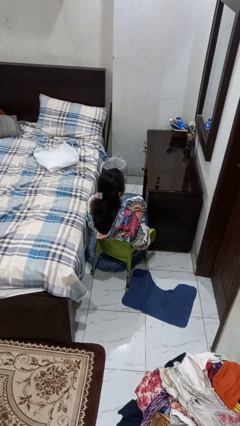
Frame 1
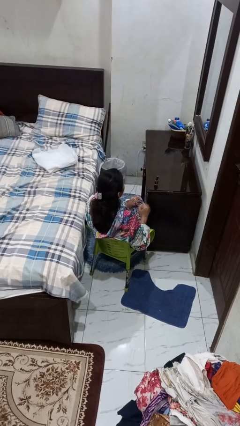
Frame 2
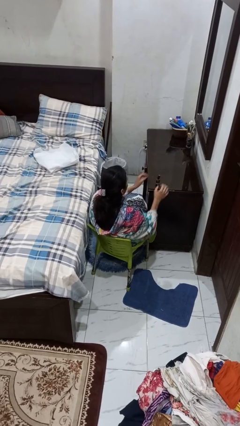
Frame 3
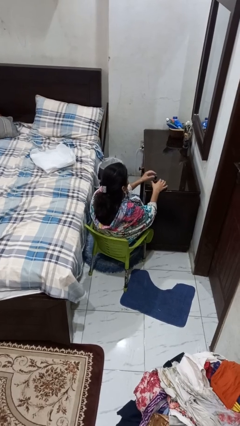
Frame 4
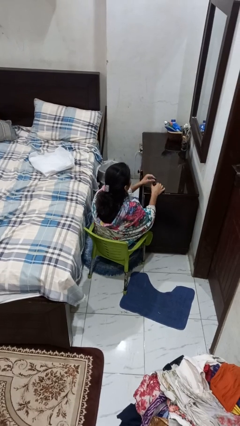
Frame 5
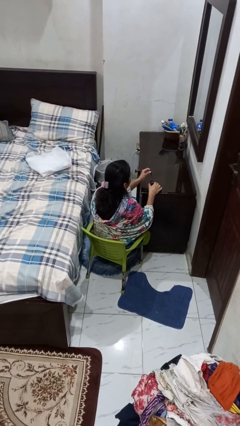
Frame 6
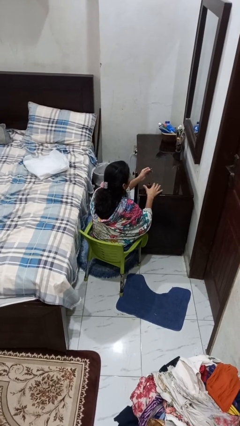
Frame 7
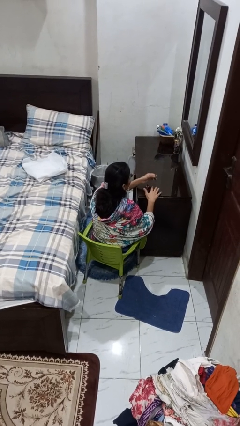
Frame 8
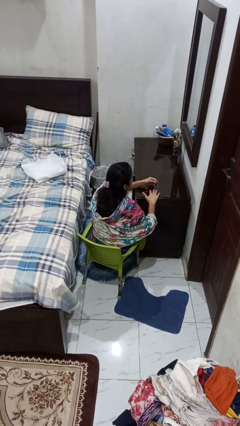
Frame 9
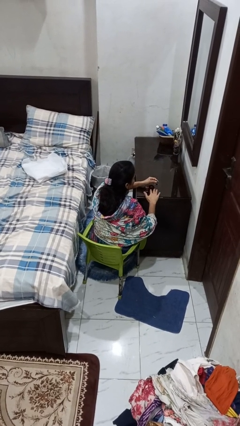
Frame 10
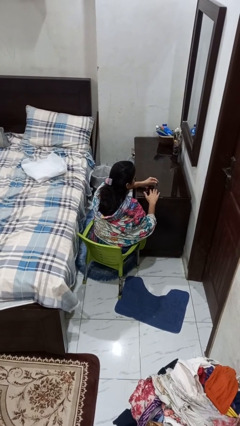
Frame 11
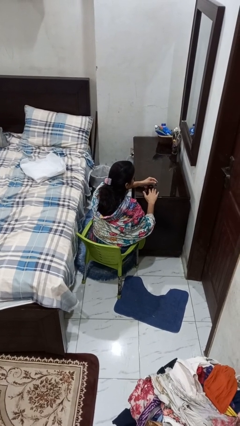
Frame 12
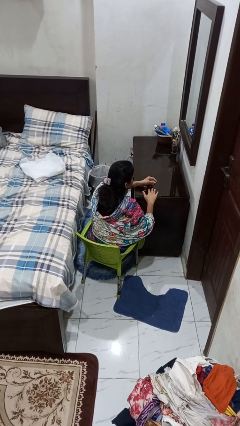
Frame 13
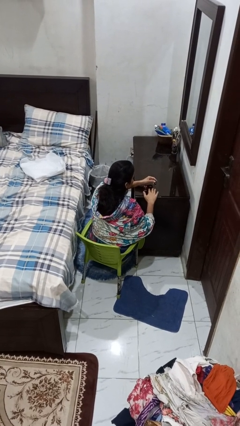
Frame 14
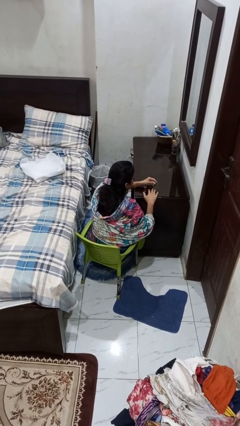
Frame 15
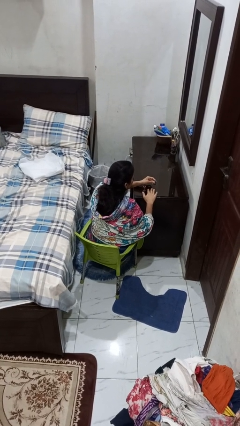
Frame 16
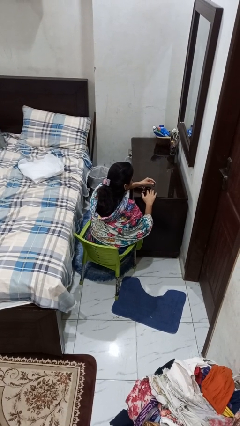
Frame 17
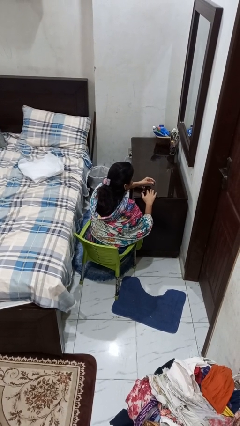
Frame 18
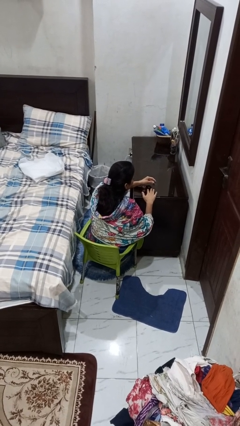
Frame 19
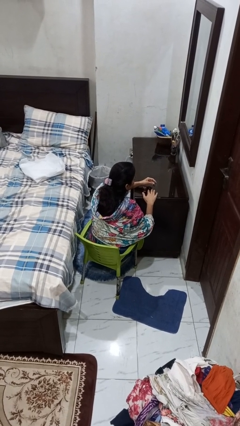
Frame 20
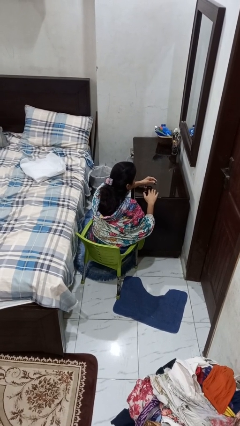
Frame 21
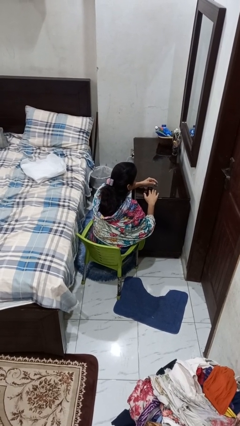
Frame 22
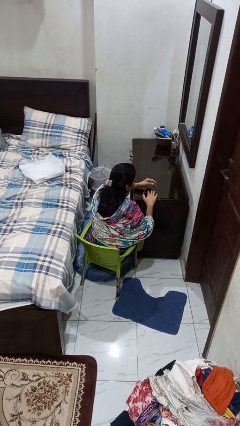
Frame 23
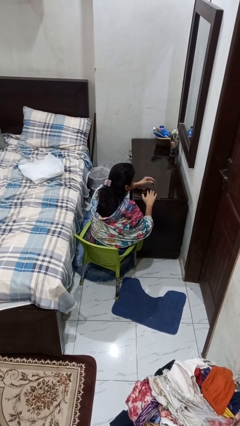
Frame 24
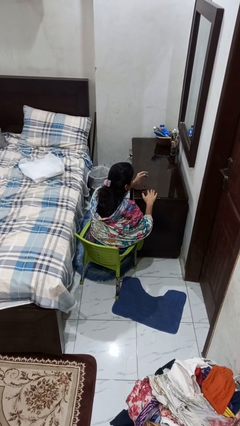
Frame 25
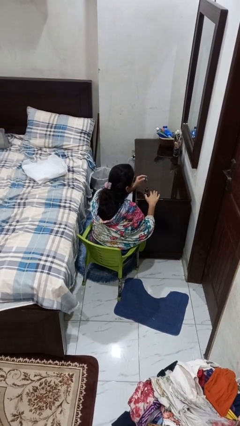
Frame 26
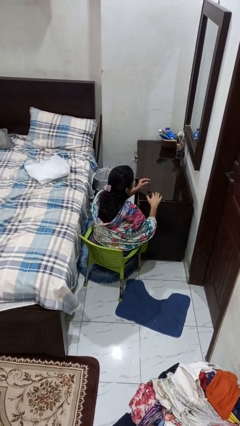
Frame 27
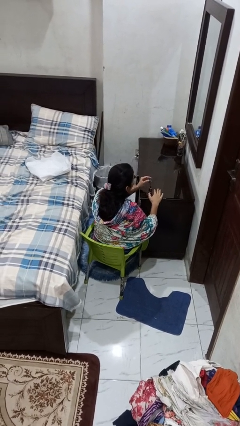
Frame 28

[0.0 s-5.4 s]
person paints fingernails

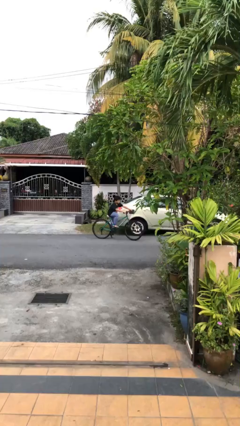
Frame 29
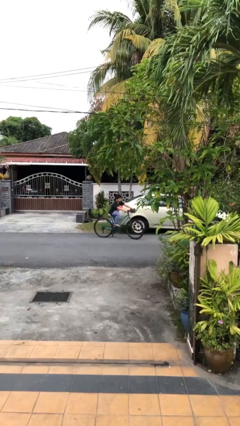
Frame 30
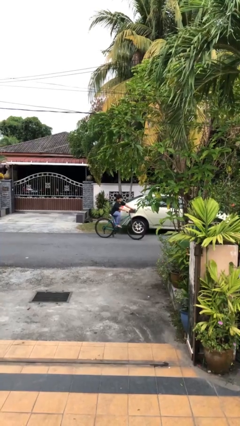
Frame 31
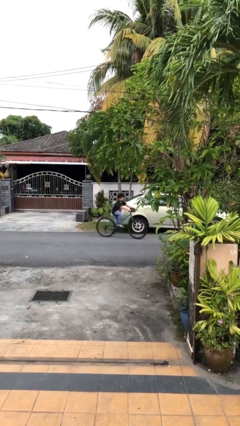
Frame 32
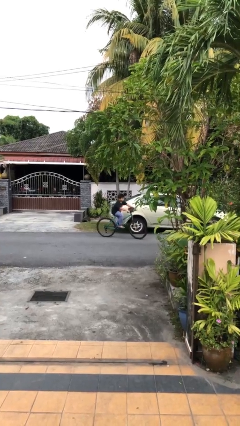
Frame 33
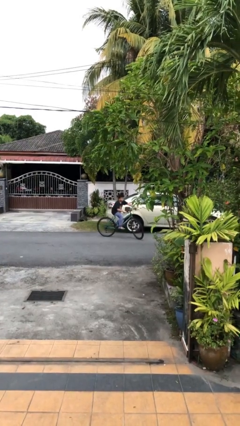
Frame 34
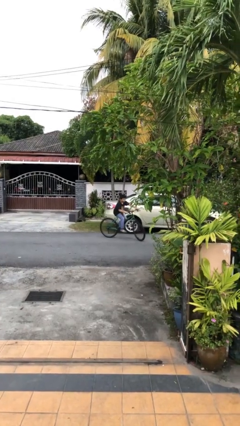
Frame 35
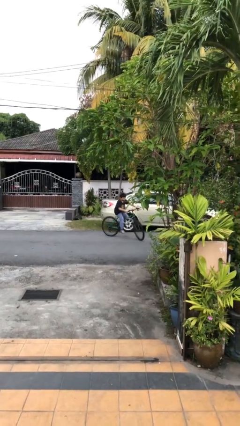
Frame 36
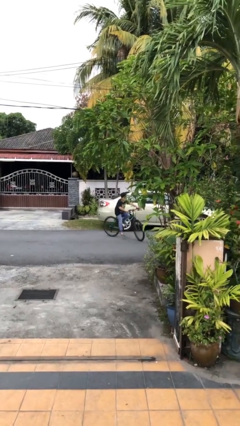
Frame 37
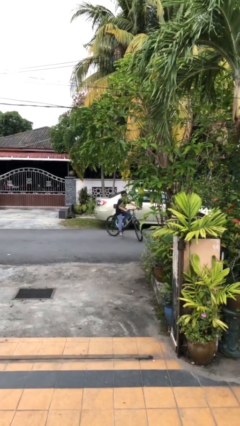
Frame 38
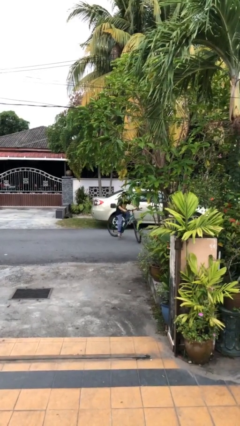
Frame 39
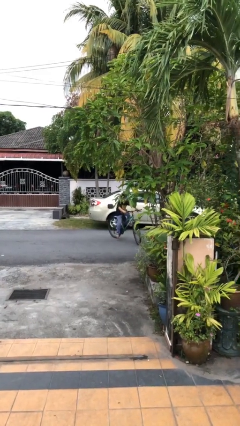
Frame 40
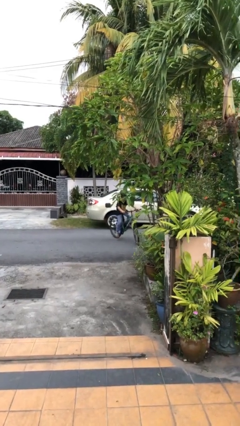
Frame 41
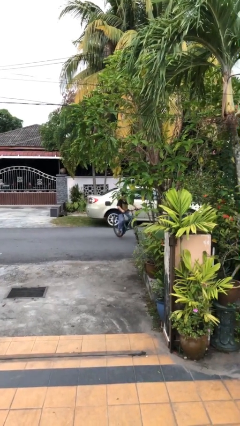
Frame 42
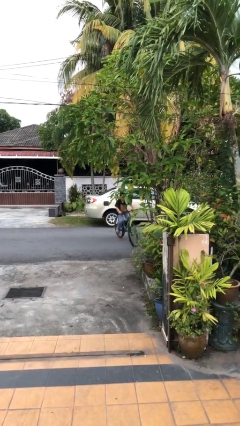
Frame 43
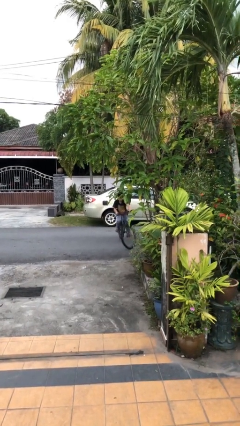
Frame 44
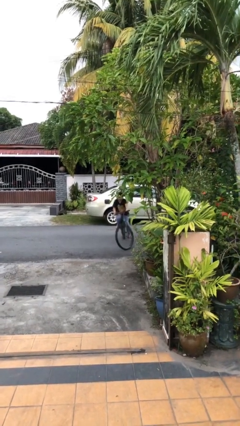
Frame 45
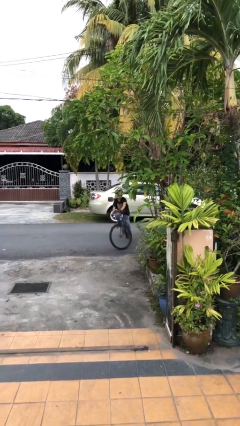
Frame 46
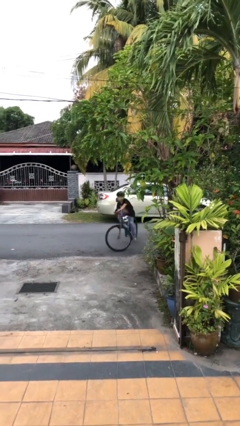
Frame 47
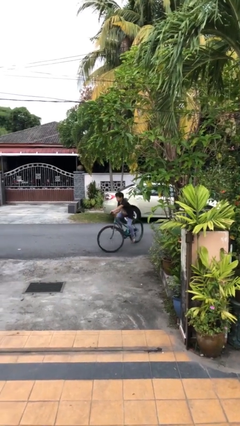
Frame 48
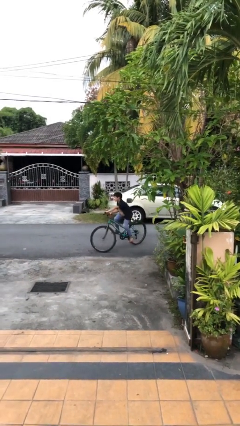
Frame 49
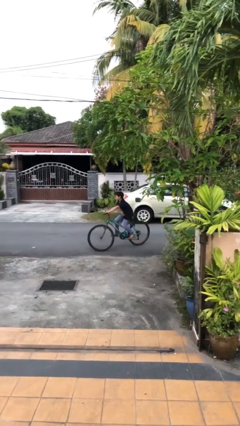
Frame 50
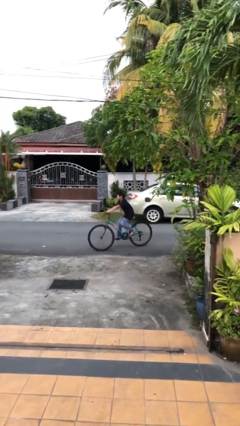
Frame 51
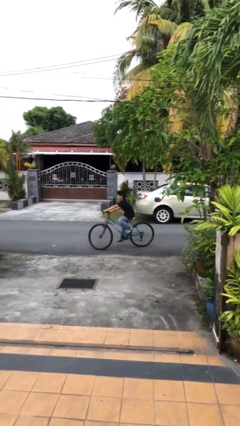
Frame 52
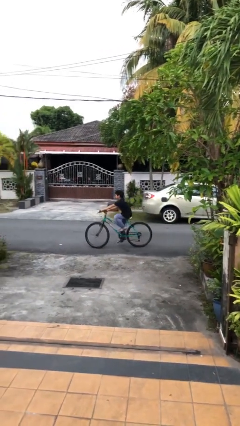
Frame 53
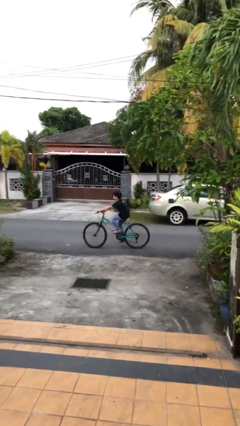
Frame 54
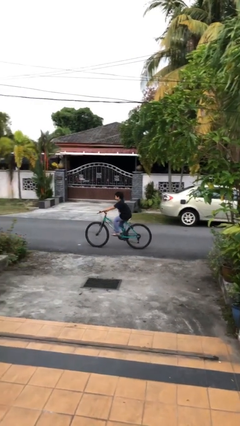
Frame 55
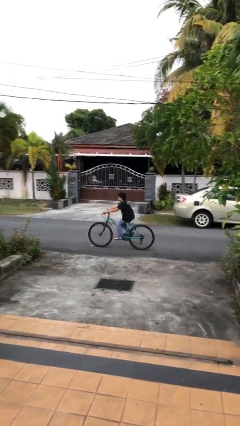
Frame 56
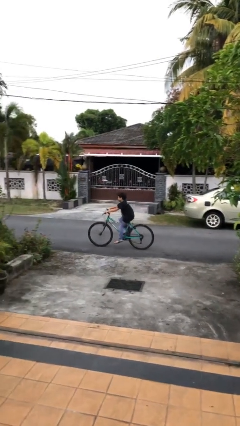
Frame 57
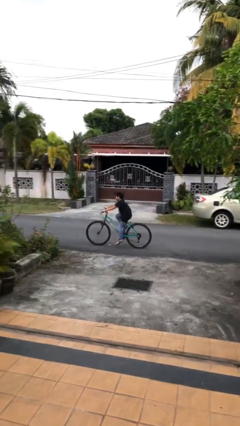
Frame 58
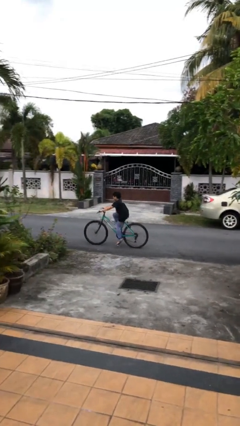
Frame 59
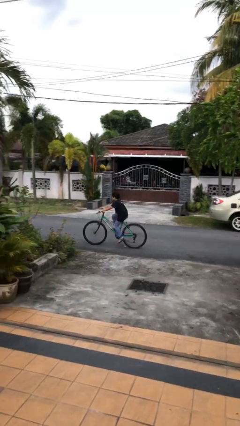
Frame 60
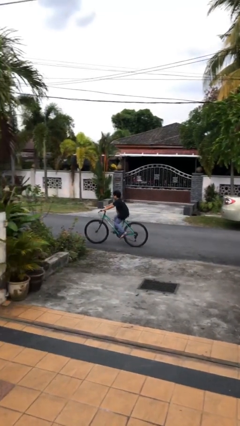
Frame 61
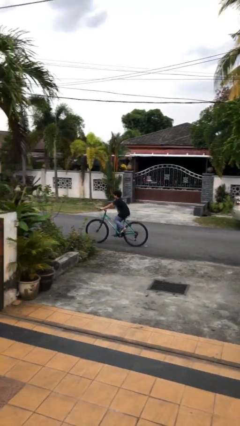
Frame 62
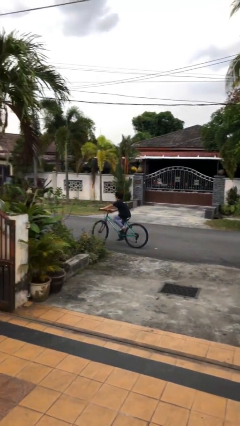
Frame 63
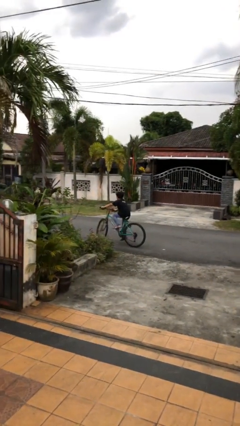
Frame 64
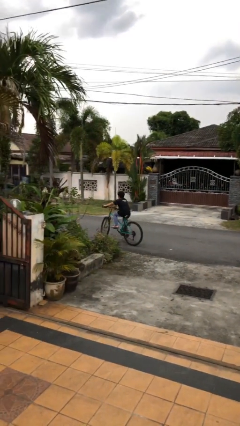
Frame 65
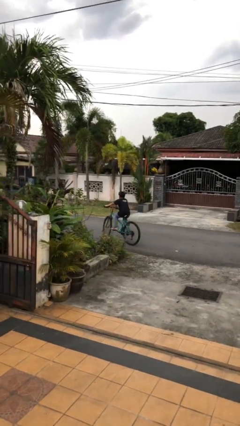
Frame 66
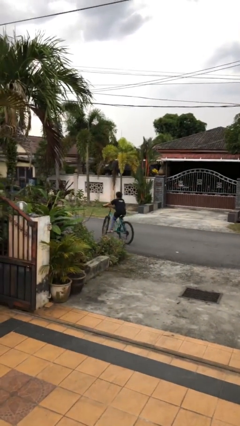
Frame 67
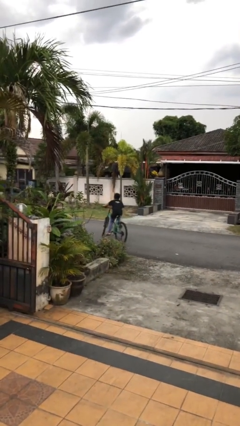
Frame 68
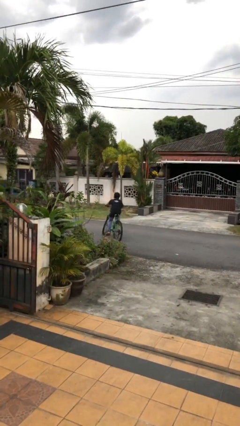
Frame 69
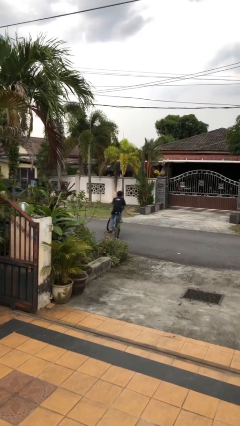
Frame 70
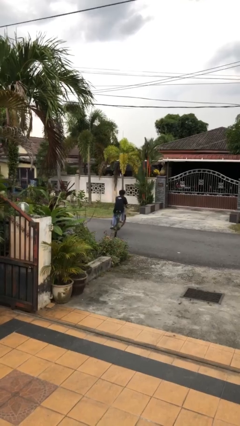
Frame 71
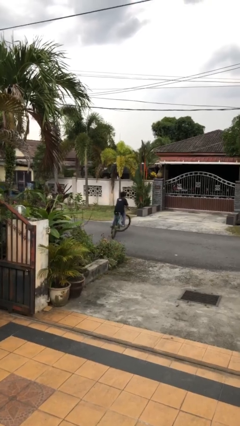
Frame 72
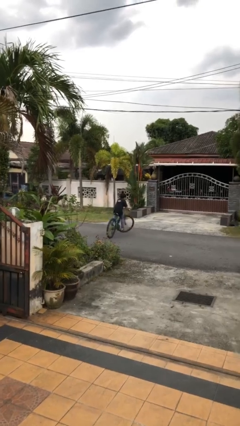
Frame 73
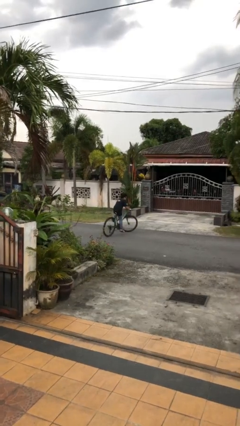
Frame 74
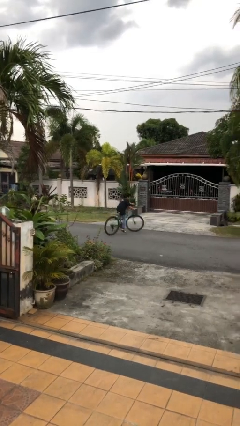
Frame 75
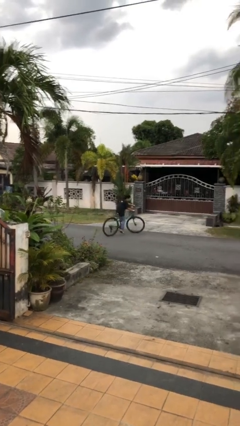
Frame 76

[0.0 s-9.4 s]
person rides bicycle

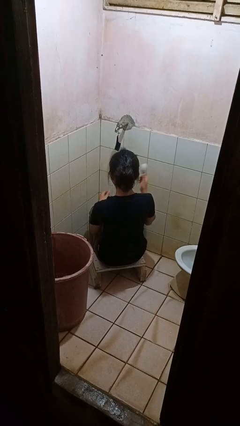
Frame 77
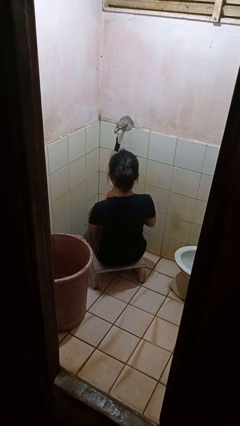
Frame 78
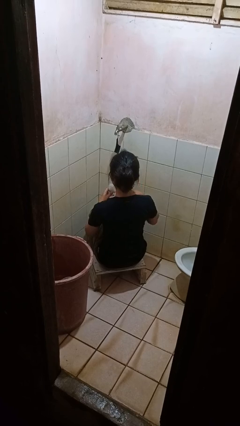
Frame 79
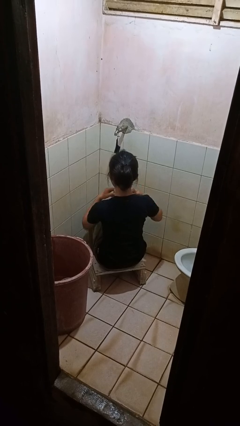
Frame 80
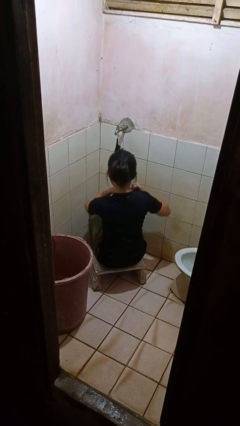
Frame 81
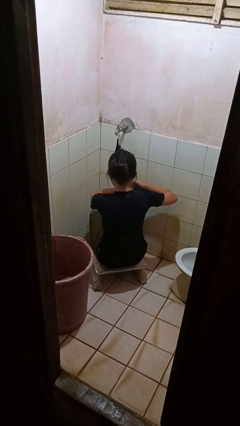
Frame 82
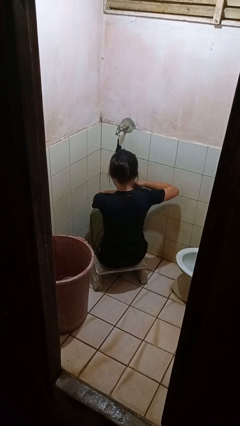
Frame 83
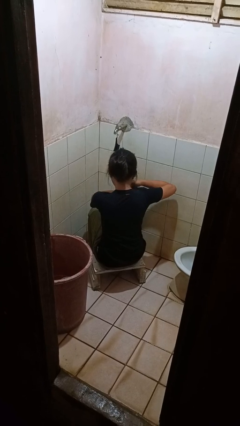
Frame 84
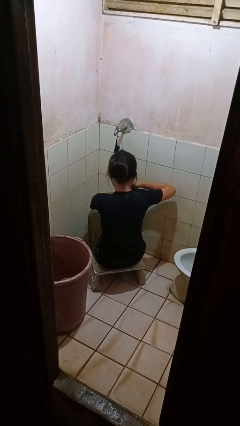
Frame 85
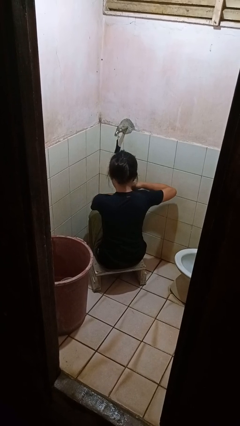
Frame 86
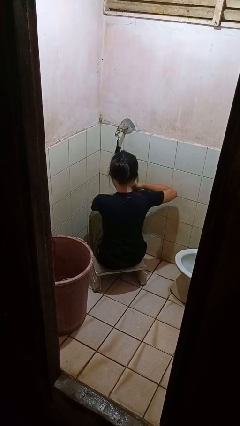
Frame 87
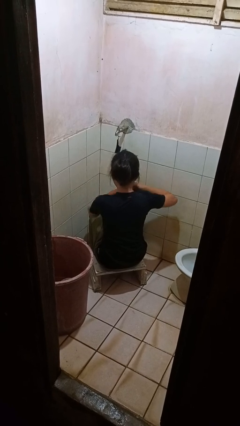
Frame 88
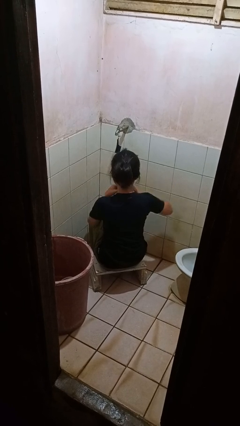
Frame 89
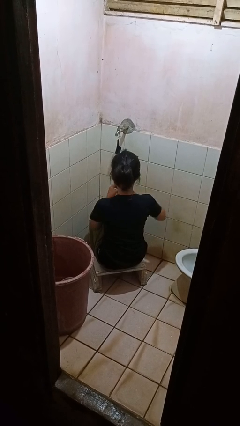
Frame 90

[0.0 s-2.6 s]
person applies deodorant

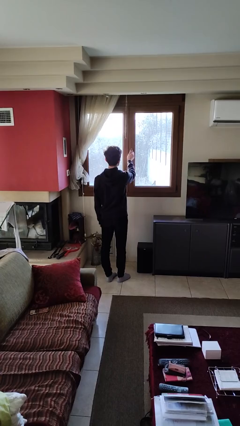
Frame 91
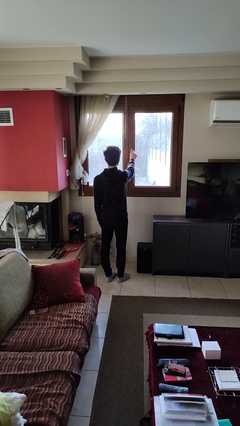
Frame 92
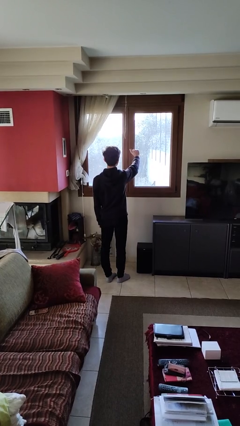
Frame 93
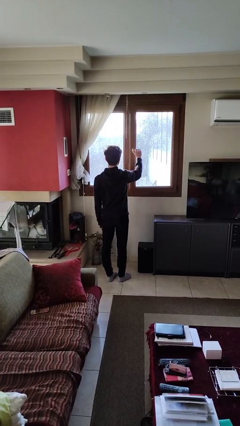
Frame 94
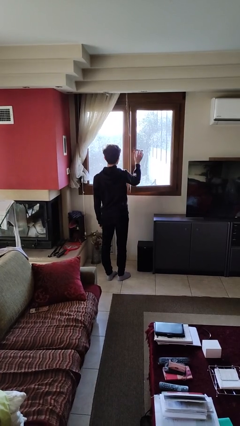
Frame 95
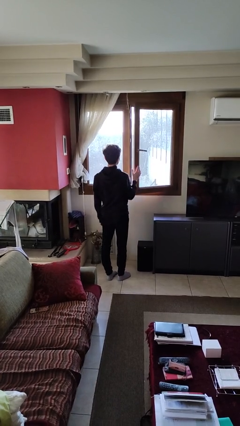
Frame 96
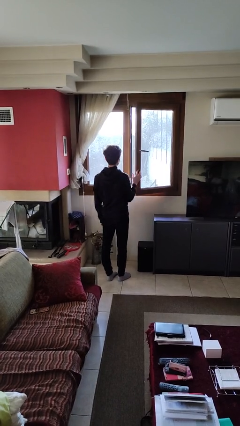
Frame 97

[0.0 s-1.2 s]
person opens home window
